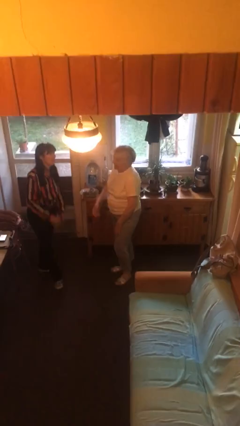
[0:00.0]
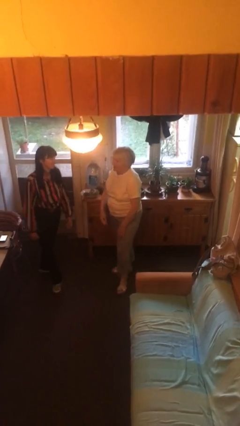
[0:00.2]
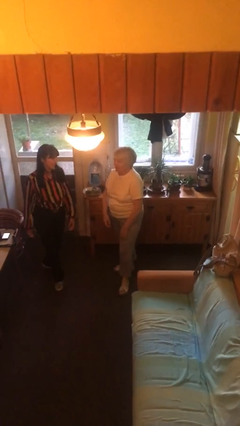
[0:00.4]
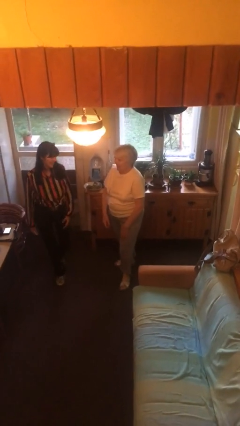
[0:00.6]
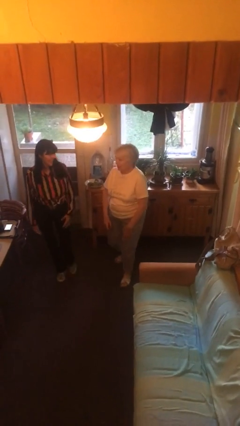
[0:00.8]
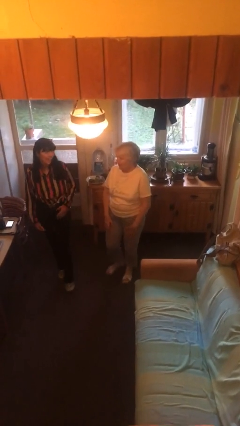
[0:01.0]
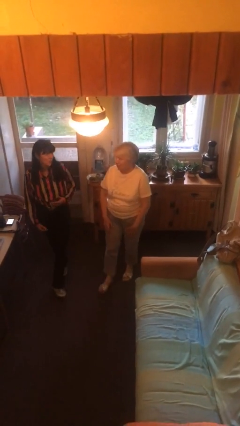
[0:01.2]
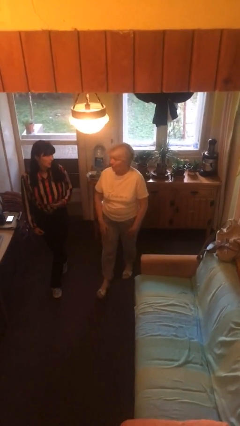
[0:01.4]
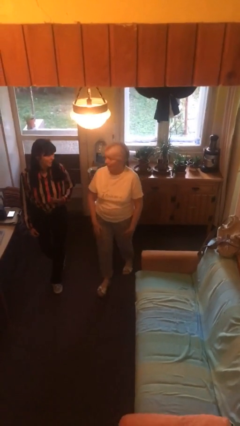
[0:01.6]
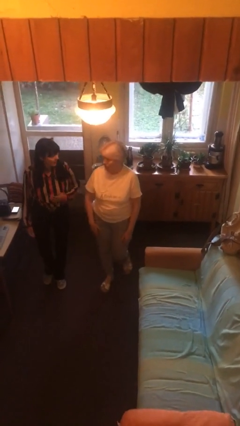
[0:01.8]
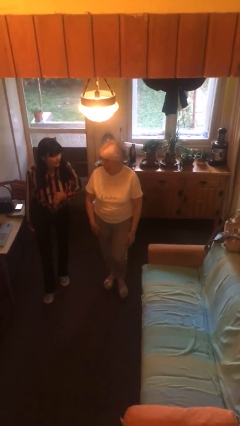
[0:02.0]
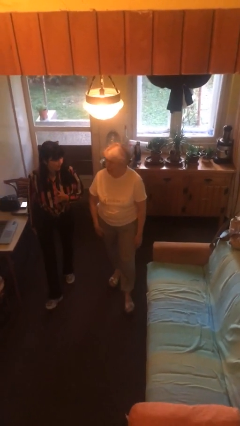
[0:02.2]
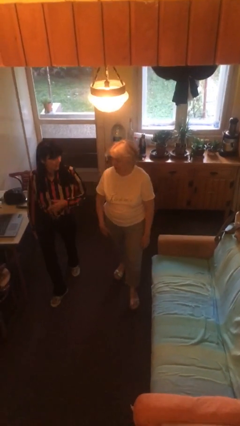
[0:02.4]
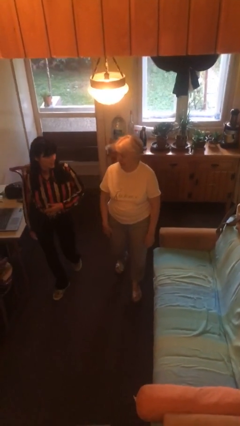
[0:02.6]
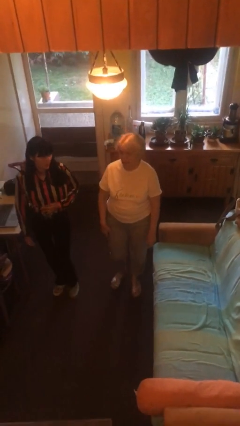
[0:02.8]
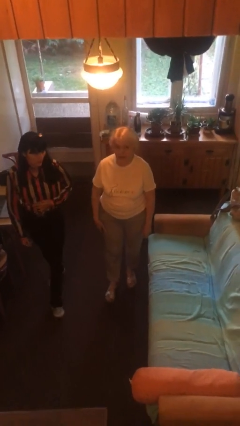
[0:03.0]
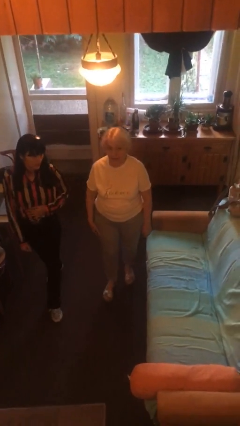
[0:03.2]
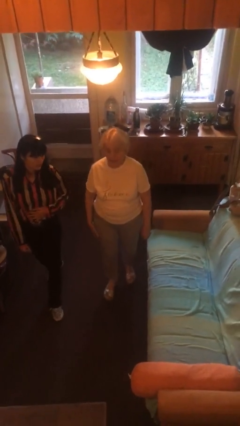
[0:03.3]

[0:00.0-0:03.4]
person talks to person

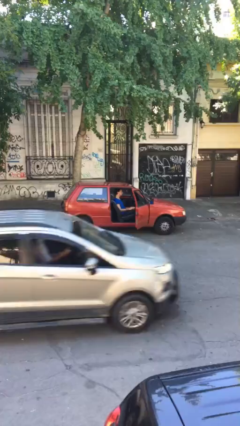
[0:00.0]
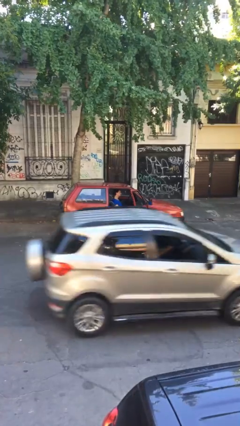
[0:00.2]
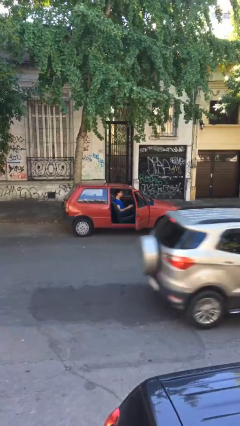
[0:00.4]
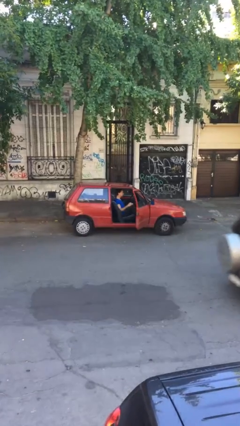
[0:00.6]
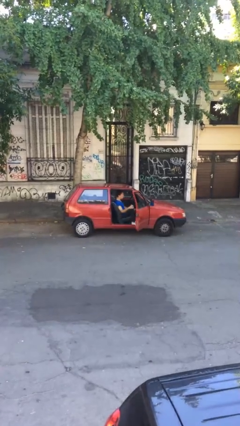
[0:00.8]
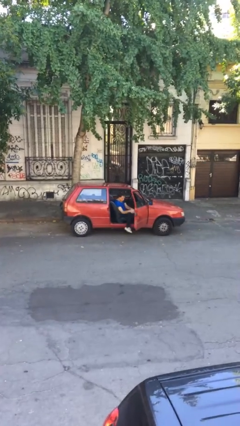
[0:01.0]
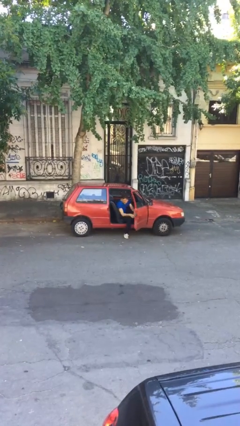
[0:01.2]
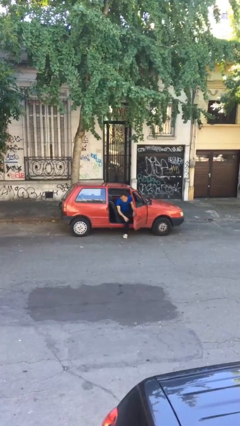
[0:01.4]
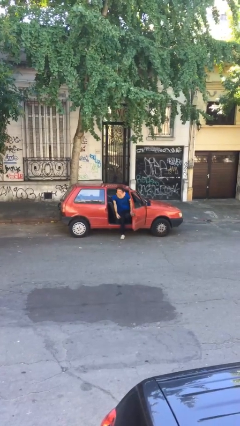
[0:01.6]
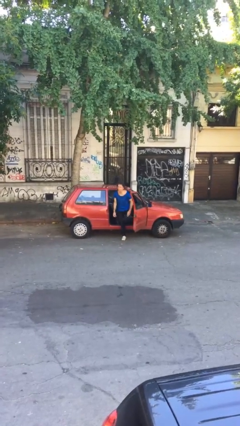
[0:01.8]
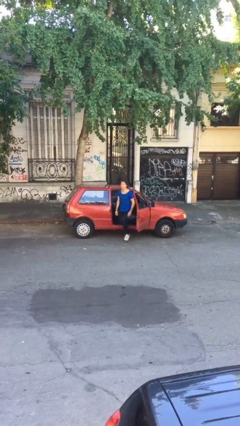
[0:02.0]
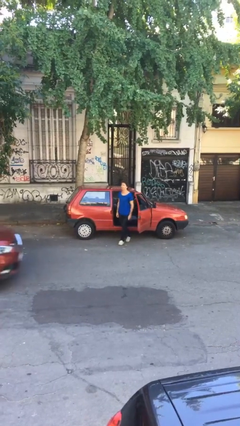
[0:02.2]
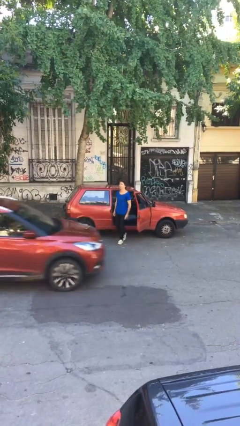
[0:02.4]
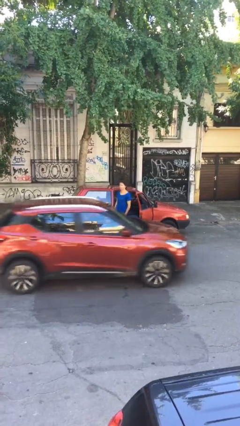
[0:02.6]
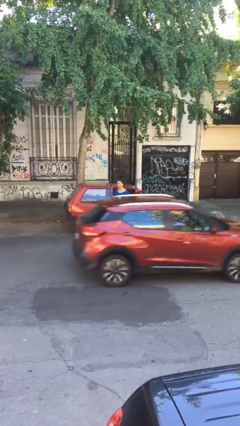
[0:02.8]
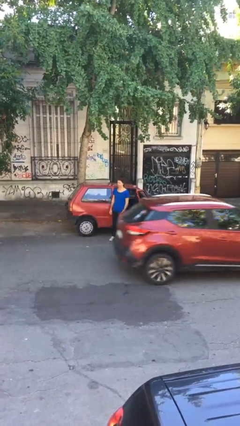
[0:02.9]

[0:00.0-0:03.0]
person exits car

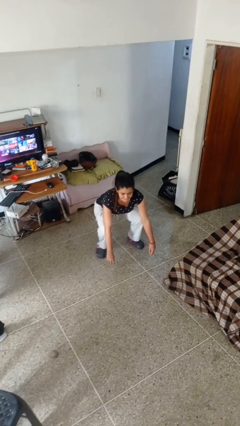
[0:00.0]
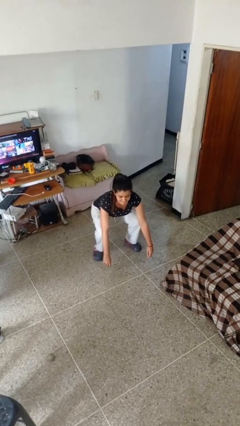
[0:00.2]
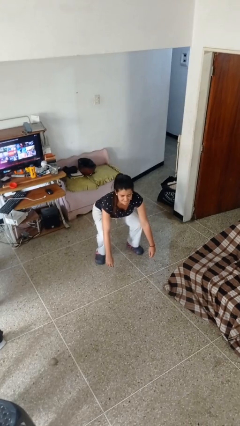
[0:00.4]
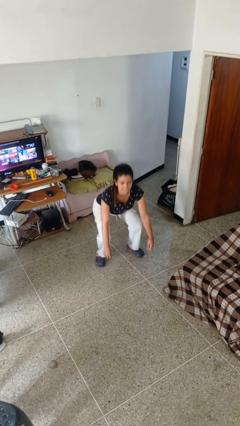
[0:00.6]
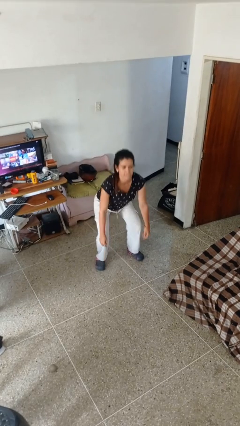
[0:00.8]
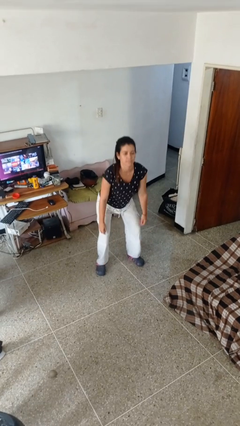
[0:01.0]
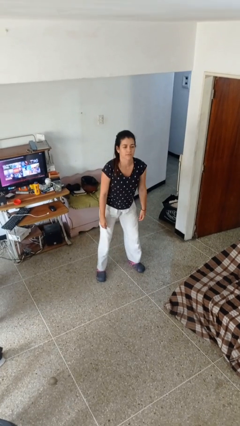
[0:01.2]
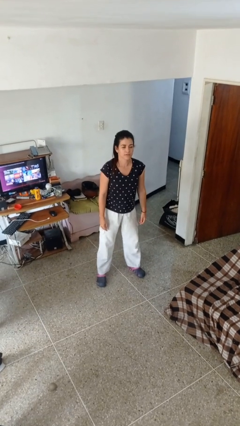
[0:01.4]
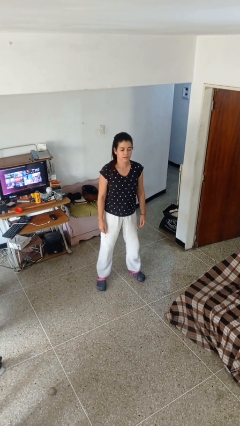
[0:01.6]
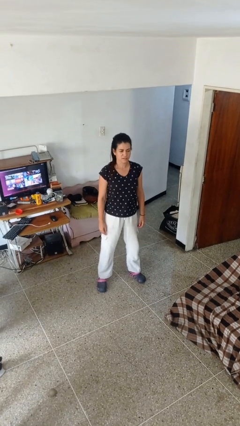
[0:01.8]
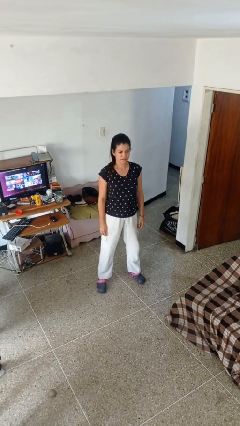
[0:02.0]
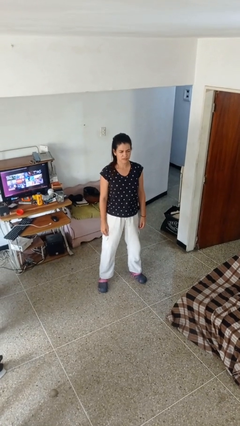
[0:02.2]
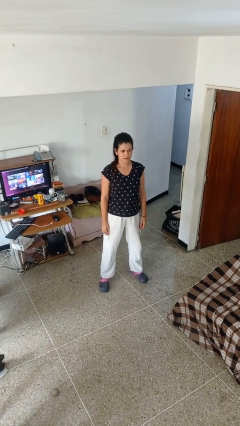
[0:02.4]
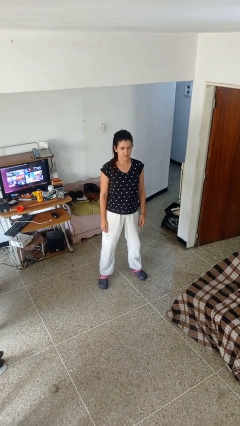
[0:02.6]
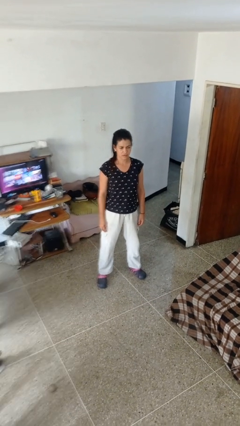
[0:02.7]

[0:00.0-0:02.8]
person stands up

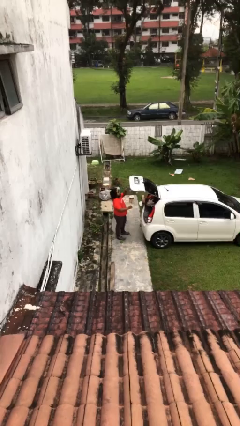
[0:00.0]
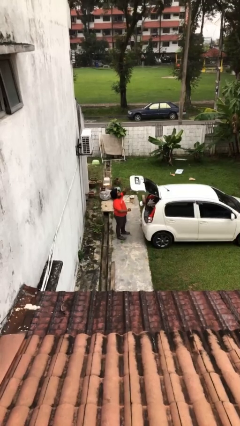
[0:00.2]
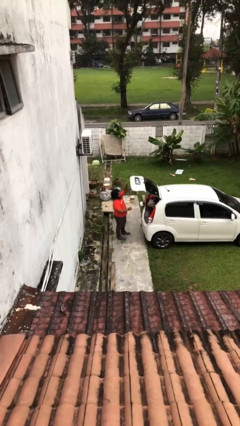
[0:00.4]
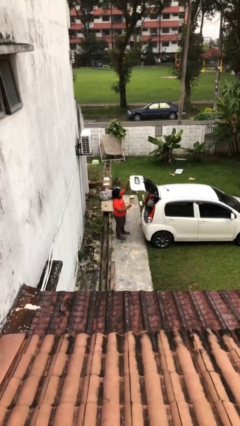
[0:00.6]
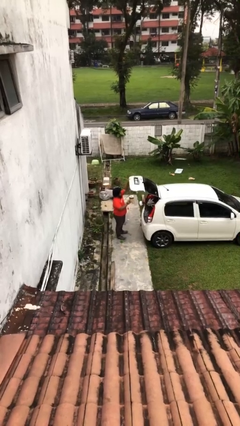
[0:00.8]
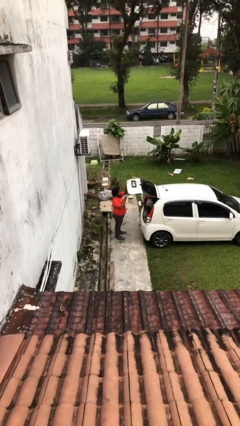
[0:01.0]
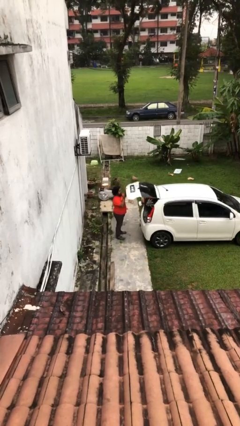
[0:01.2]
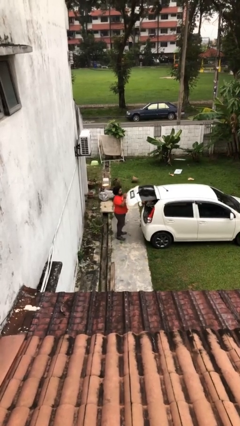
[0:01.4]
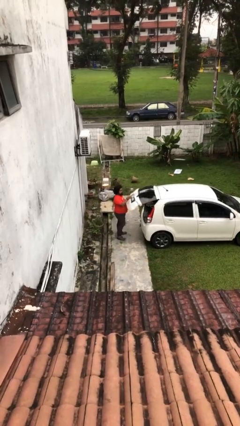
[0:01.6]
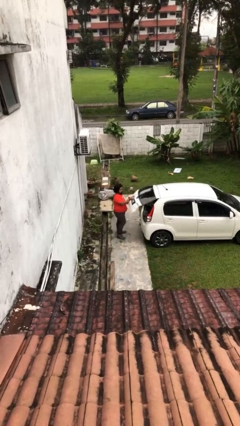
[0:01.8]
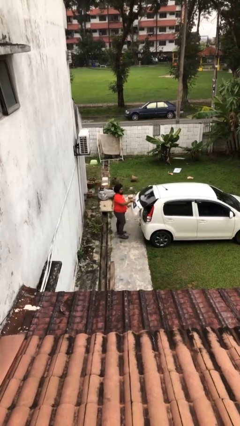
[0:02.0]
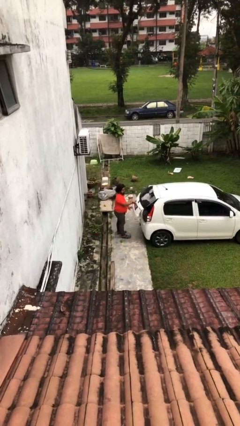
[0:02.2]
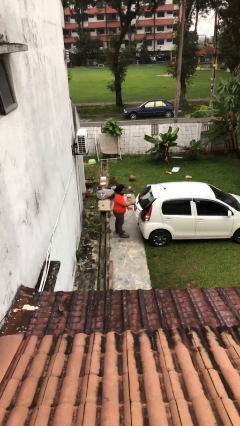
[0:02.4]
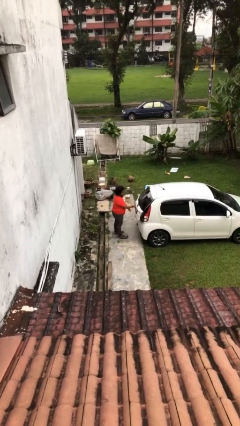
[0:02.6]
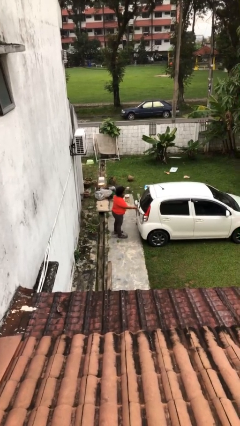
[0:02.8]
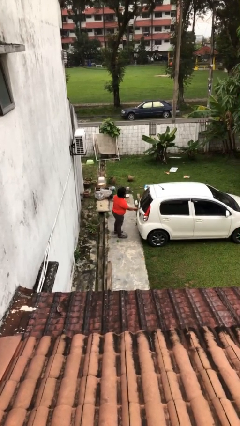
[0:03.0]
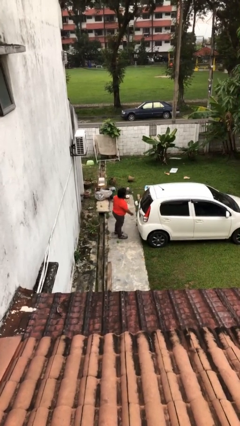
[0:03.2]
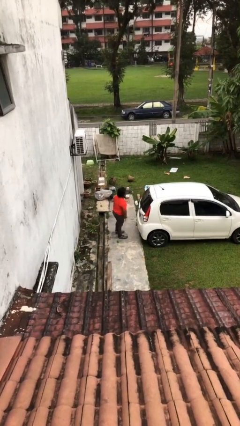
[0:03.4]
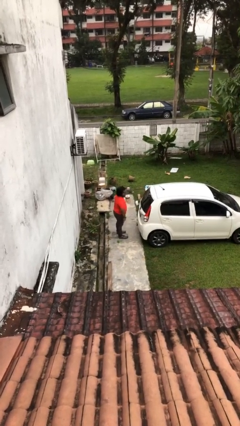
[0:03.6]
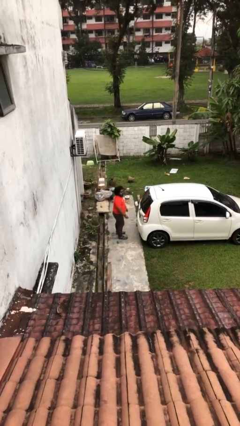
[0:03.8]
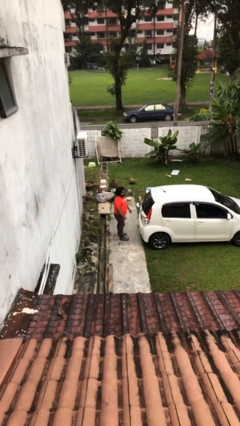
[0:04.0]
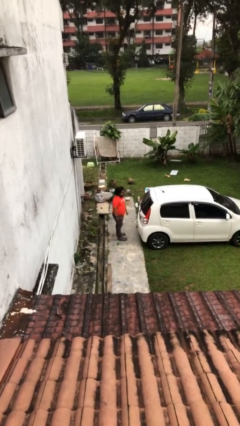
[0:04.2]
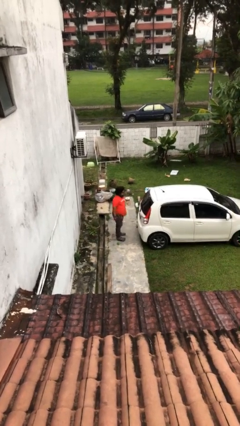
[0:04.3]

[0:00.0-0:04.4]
person closes car trunk

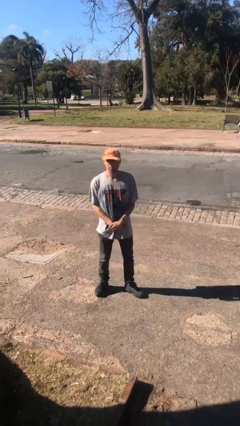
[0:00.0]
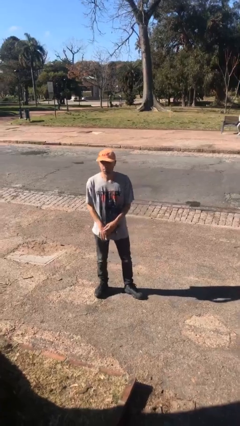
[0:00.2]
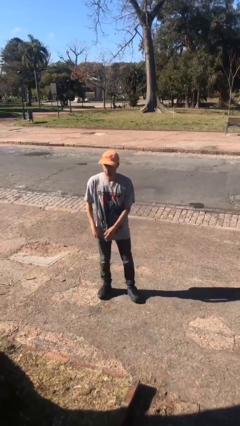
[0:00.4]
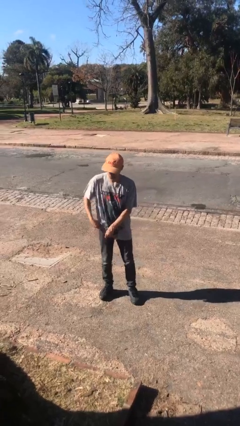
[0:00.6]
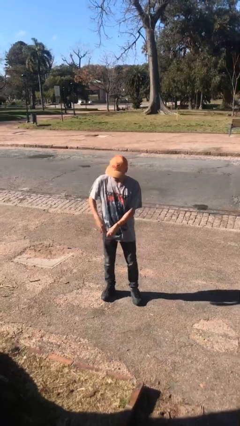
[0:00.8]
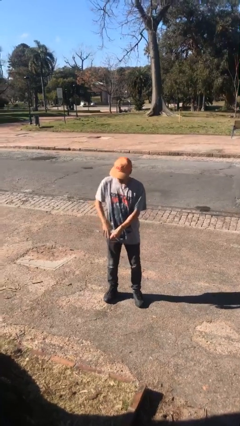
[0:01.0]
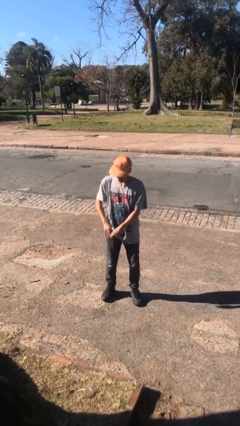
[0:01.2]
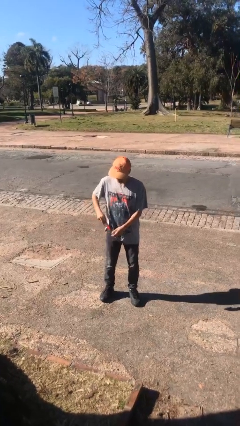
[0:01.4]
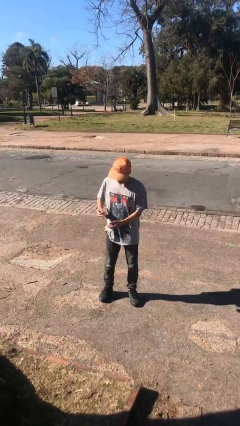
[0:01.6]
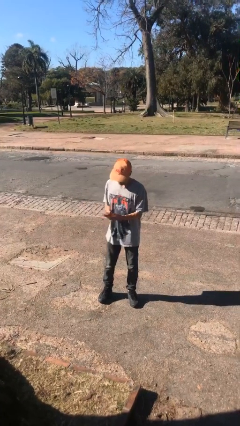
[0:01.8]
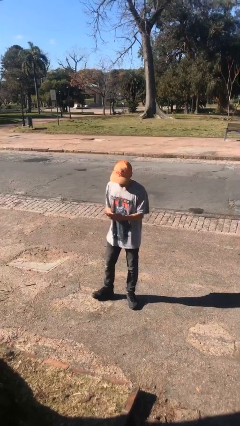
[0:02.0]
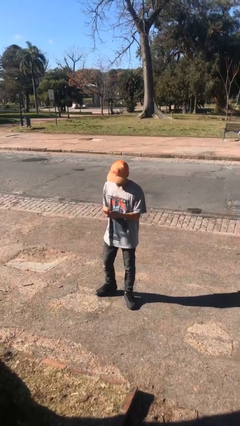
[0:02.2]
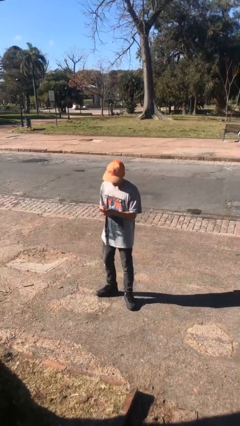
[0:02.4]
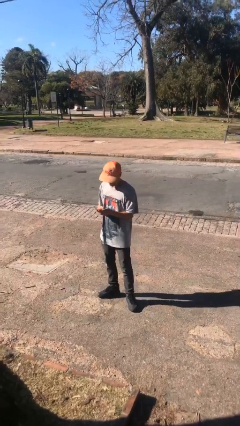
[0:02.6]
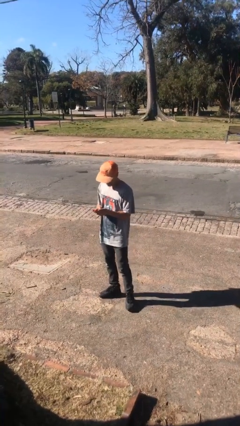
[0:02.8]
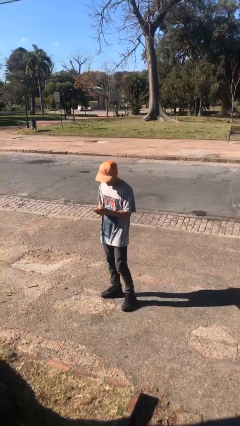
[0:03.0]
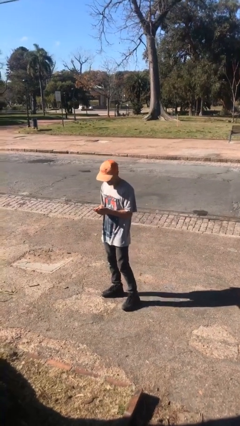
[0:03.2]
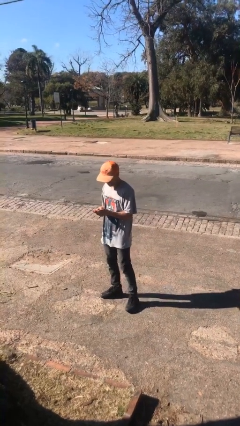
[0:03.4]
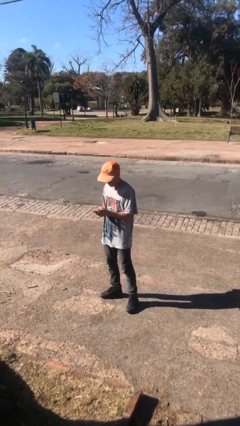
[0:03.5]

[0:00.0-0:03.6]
person takes phone from pocket

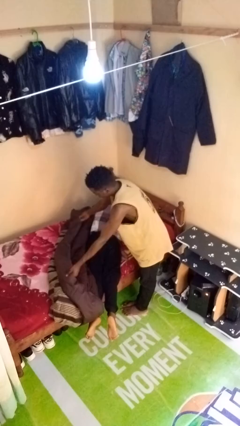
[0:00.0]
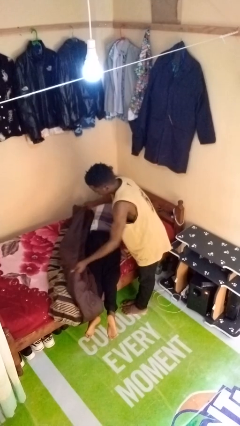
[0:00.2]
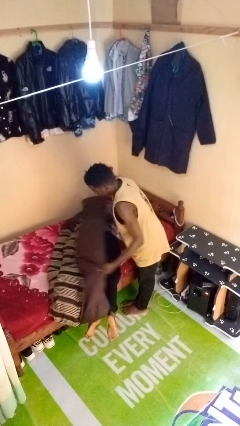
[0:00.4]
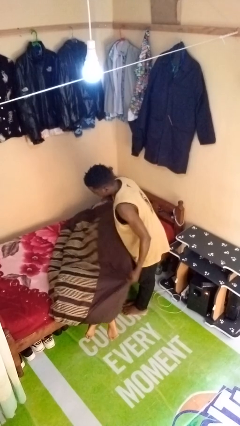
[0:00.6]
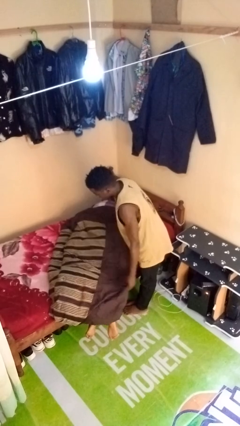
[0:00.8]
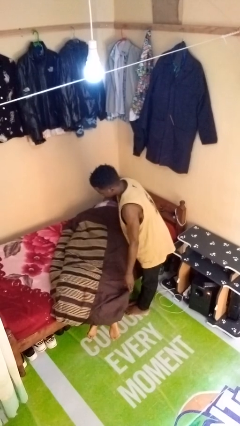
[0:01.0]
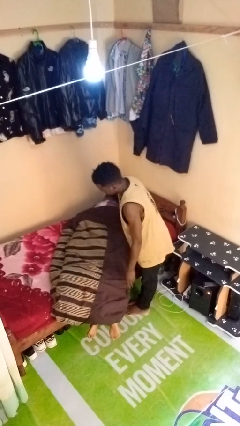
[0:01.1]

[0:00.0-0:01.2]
person covers friend with blanket
